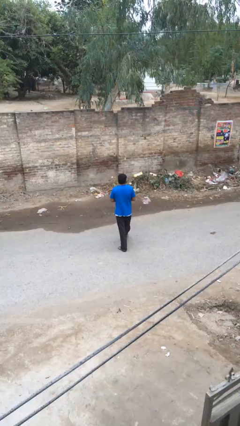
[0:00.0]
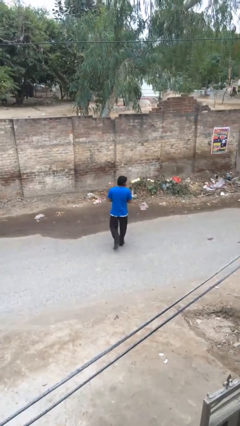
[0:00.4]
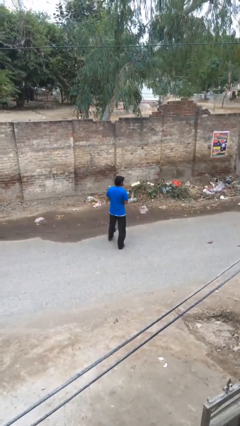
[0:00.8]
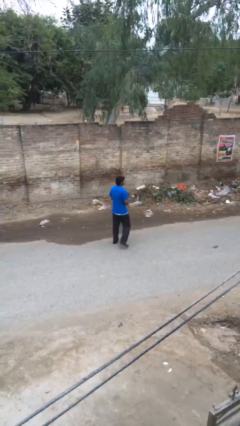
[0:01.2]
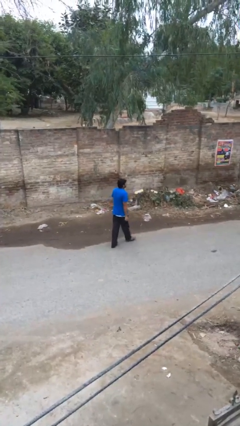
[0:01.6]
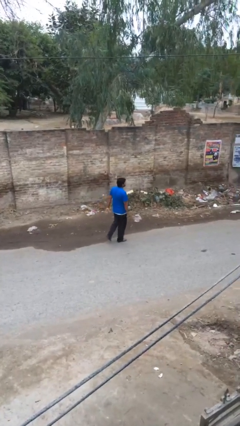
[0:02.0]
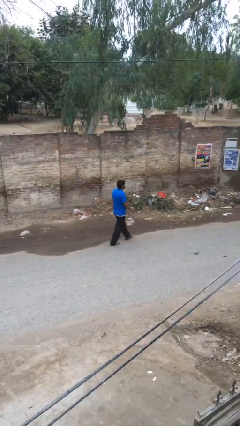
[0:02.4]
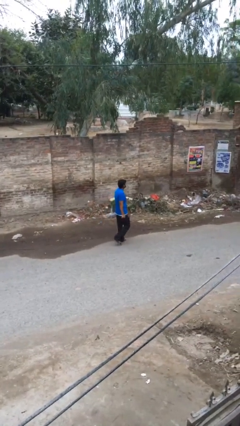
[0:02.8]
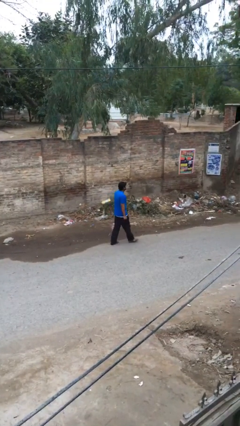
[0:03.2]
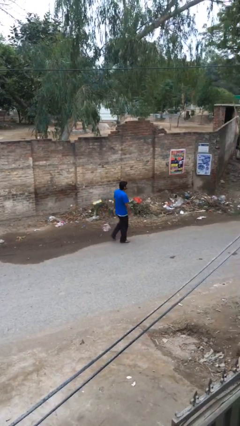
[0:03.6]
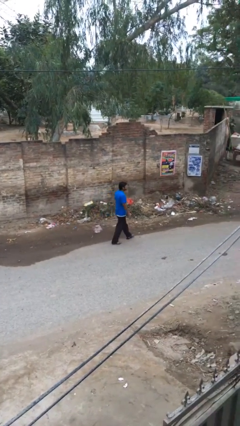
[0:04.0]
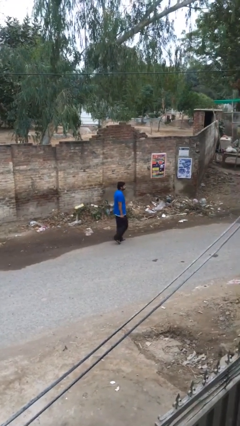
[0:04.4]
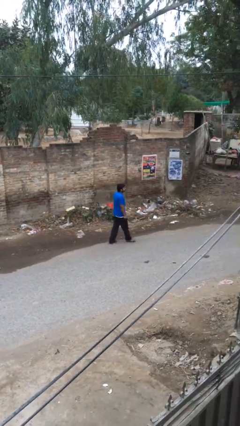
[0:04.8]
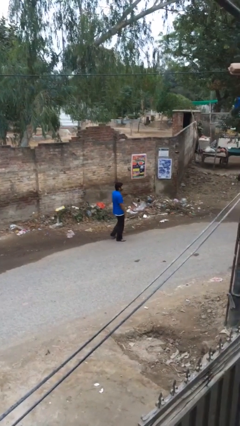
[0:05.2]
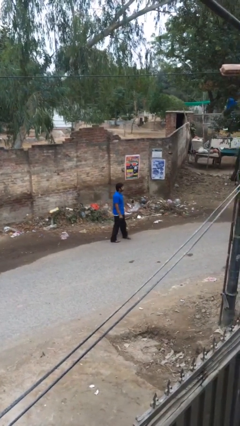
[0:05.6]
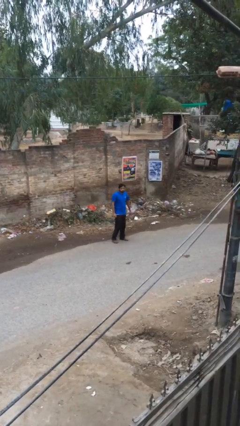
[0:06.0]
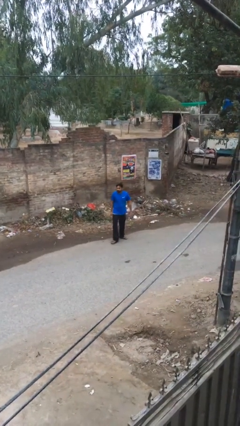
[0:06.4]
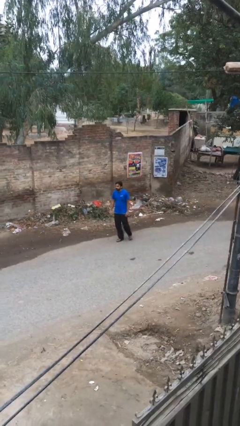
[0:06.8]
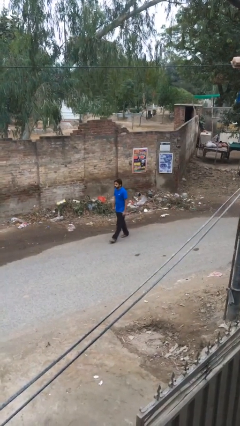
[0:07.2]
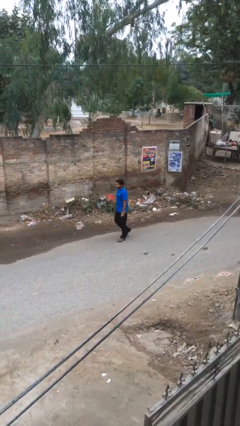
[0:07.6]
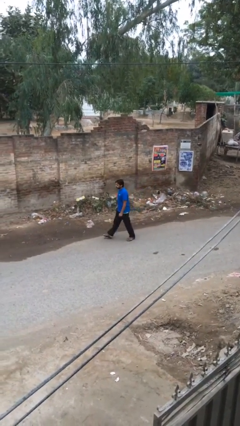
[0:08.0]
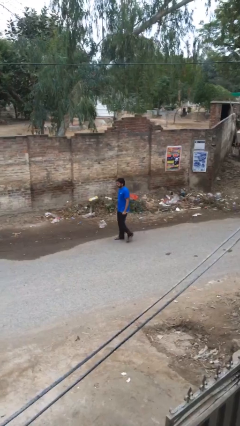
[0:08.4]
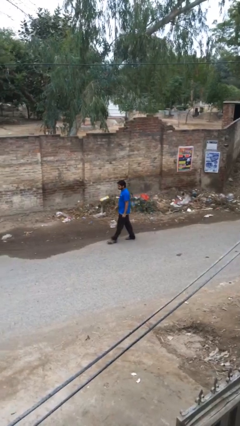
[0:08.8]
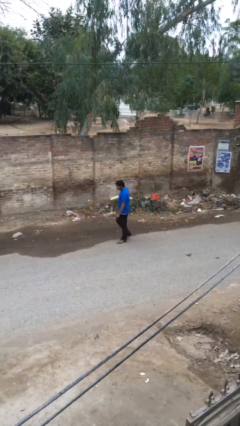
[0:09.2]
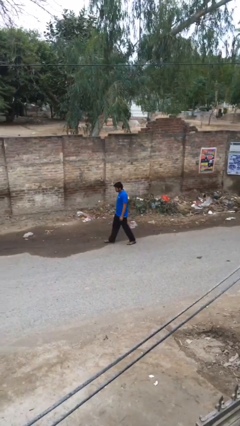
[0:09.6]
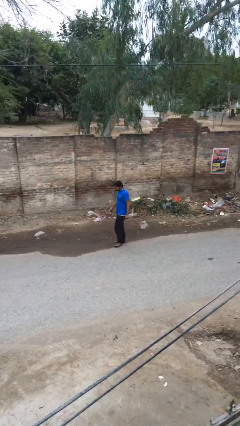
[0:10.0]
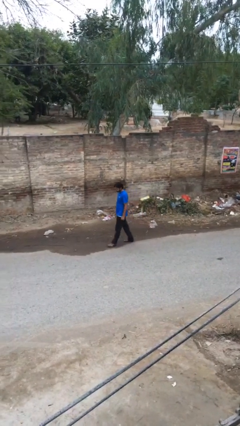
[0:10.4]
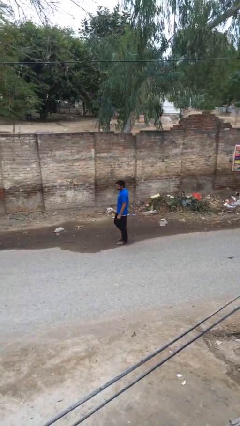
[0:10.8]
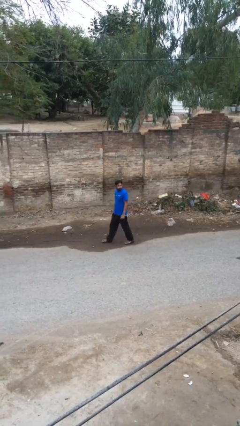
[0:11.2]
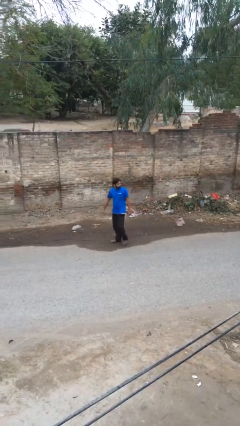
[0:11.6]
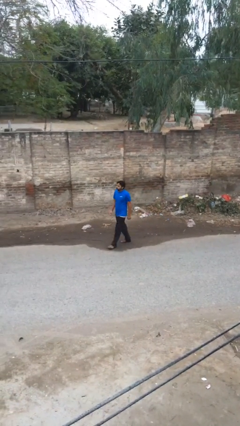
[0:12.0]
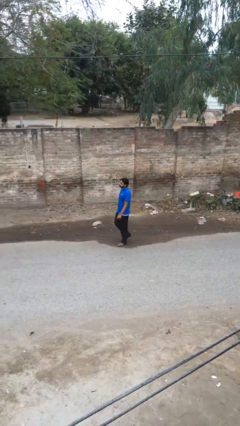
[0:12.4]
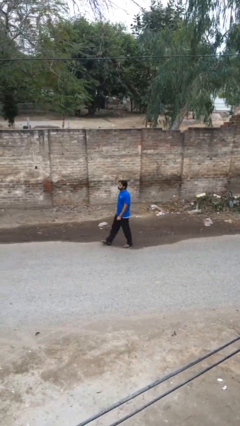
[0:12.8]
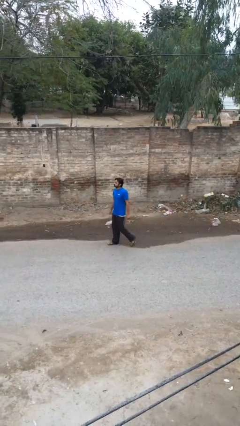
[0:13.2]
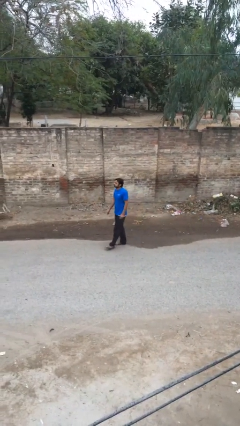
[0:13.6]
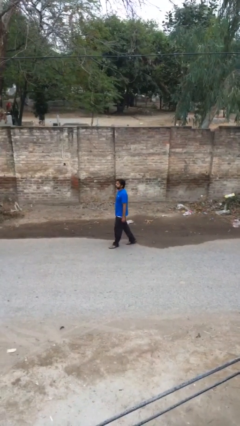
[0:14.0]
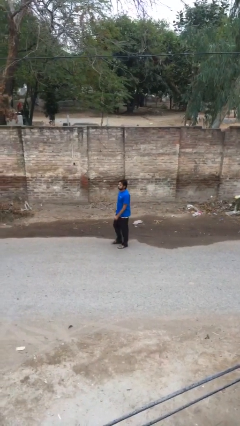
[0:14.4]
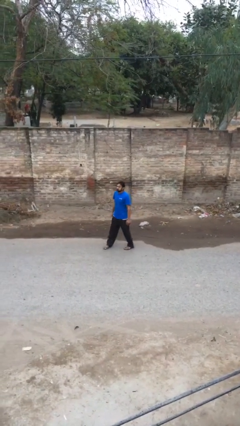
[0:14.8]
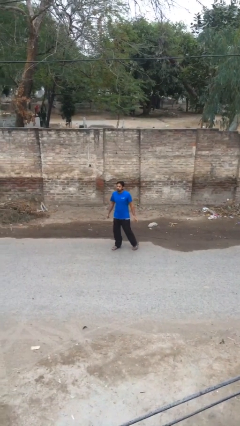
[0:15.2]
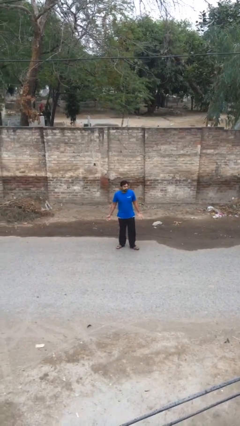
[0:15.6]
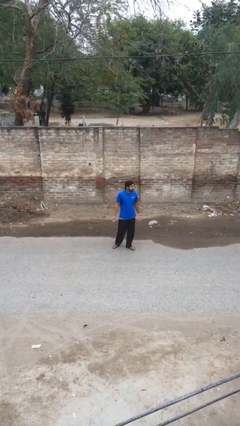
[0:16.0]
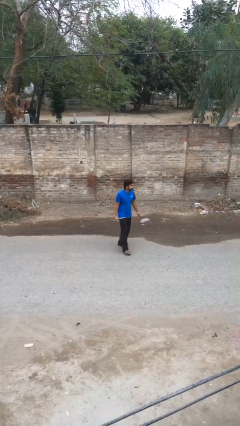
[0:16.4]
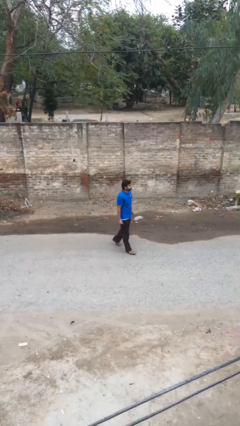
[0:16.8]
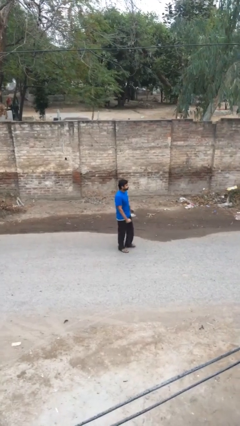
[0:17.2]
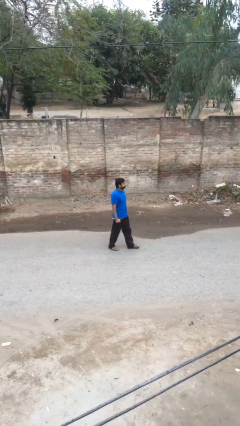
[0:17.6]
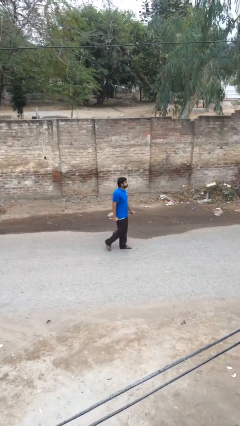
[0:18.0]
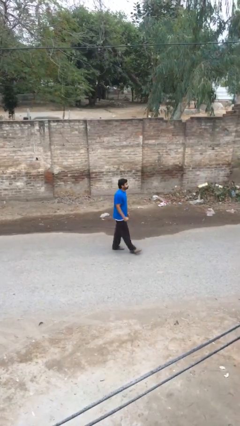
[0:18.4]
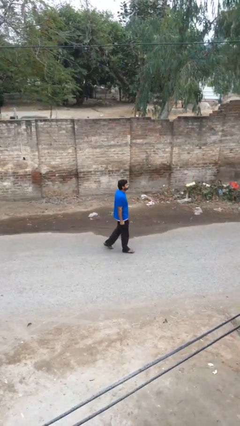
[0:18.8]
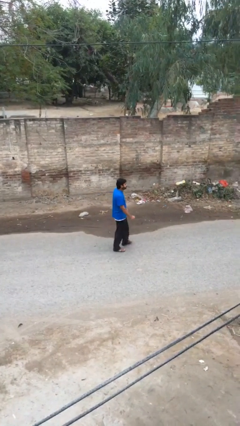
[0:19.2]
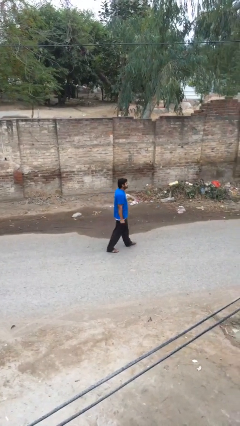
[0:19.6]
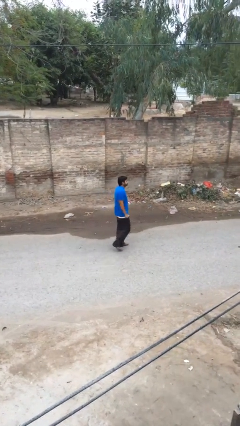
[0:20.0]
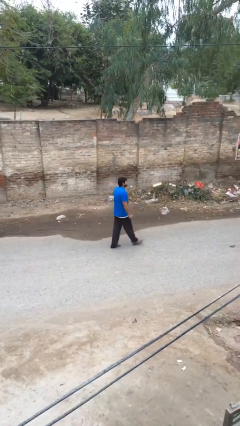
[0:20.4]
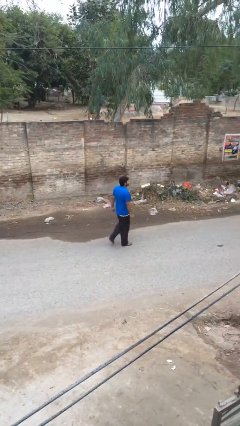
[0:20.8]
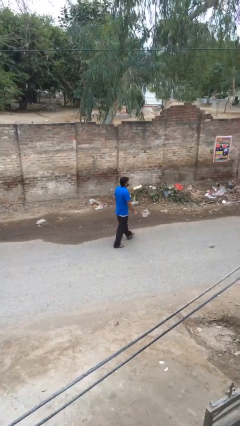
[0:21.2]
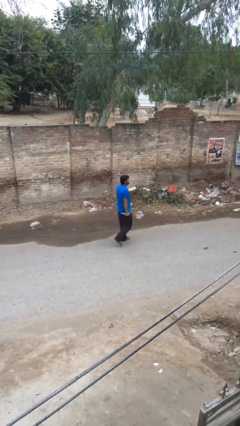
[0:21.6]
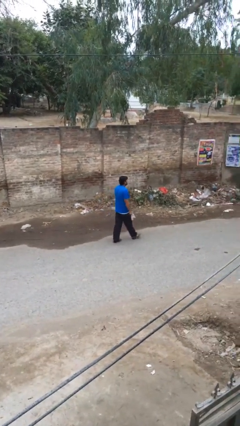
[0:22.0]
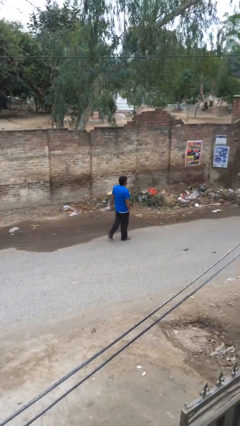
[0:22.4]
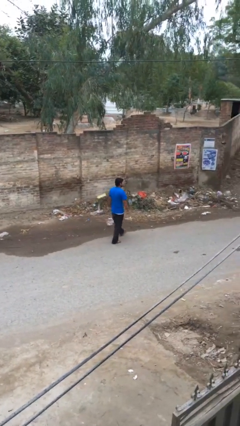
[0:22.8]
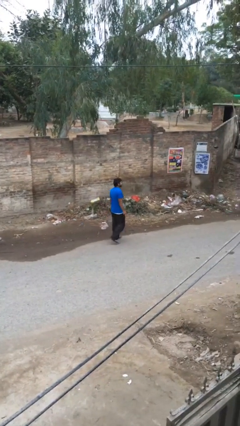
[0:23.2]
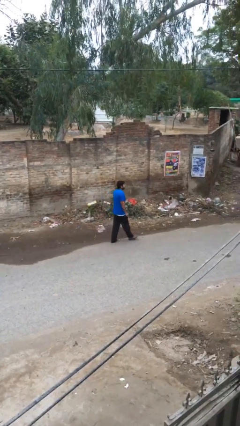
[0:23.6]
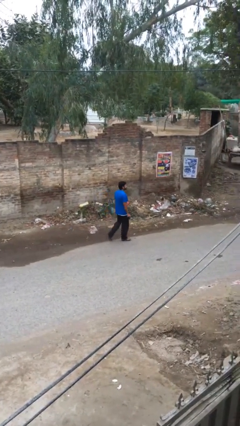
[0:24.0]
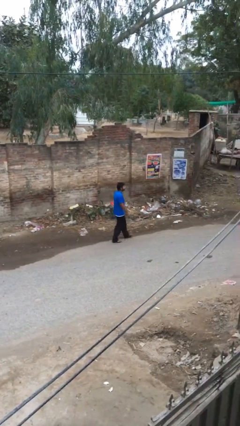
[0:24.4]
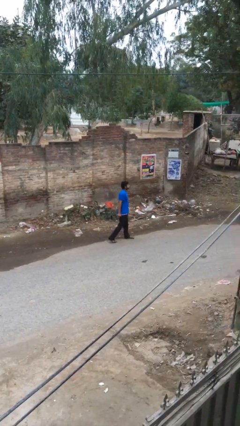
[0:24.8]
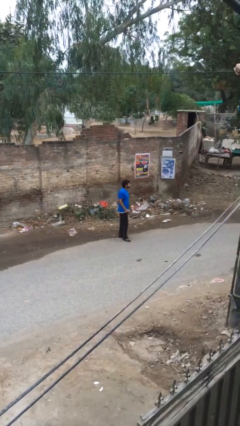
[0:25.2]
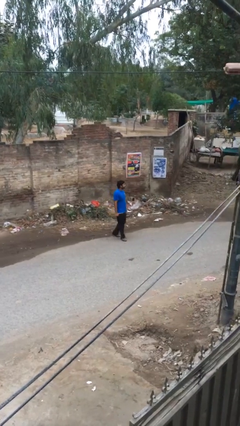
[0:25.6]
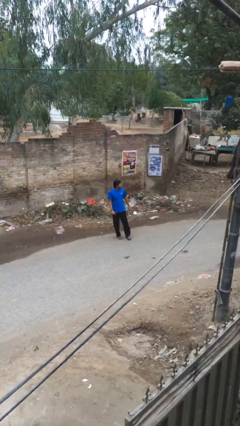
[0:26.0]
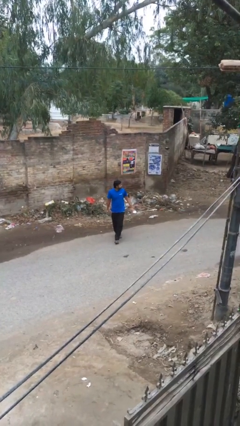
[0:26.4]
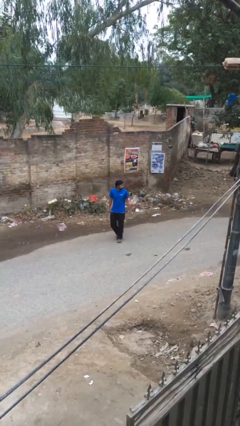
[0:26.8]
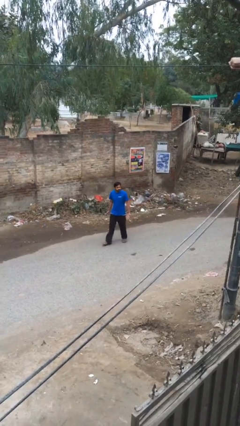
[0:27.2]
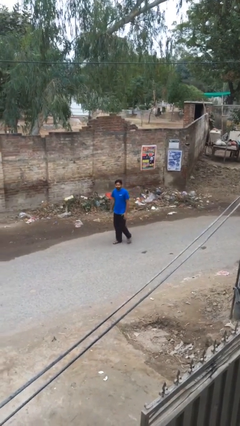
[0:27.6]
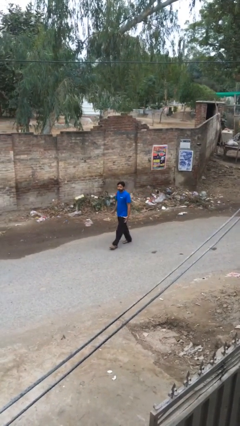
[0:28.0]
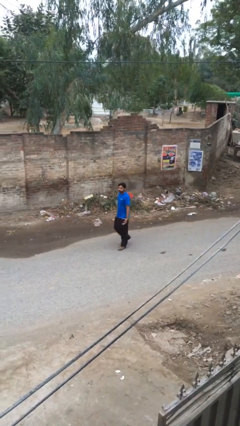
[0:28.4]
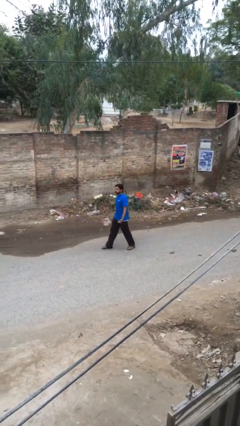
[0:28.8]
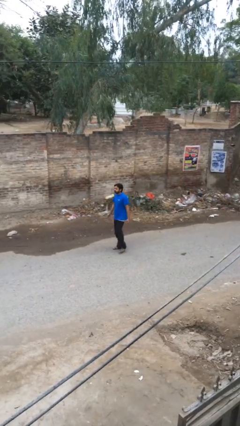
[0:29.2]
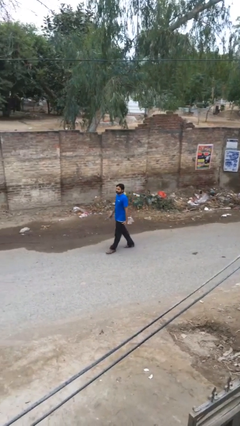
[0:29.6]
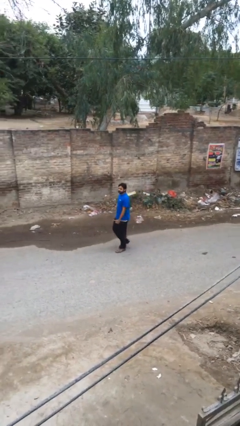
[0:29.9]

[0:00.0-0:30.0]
person walks

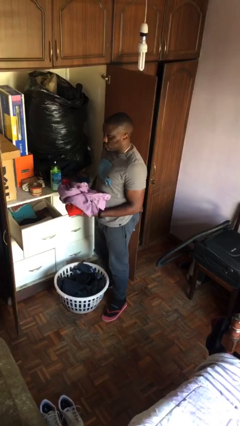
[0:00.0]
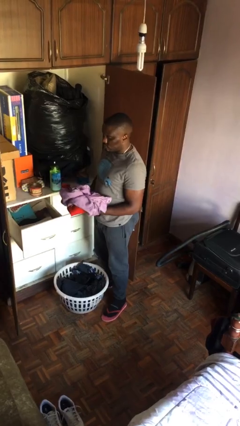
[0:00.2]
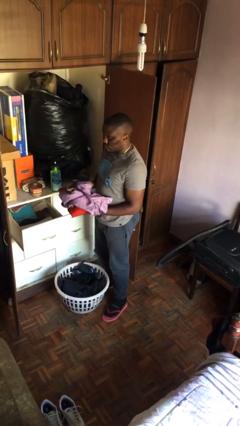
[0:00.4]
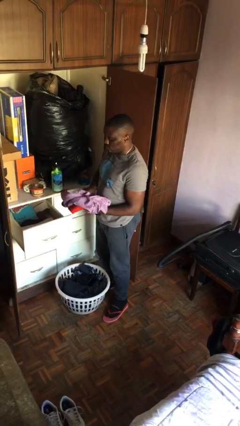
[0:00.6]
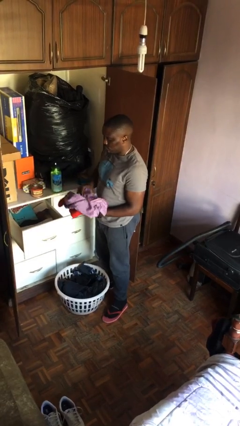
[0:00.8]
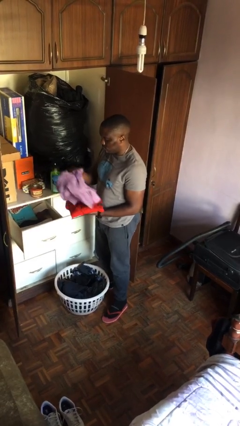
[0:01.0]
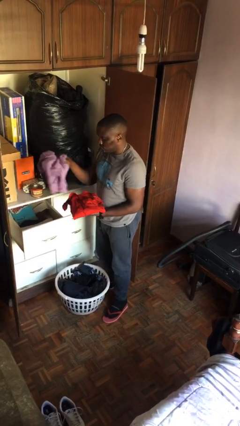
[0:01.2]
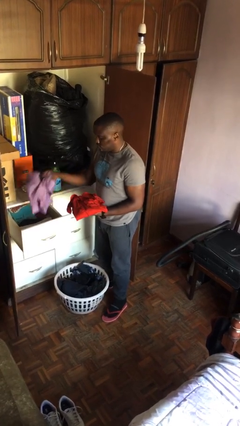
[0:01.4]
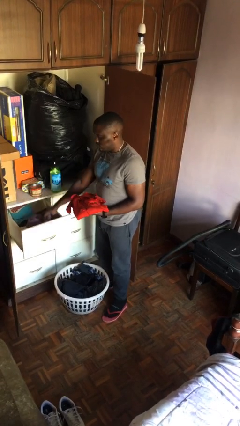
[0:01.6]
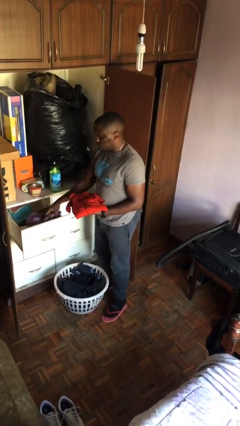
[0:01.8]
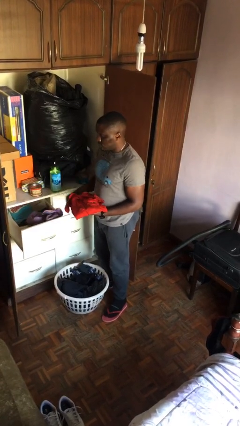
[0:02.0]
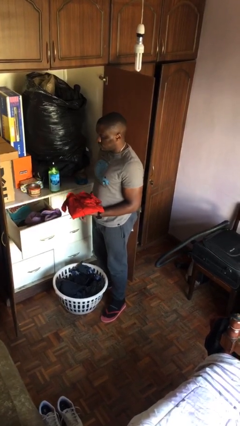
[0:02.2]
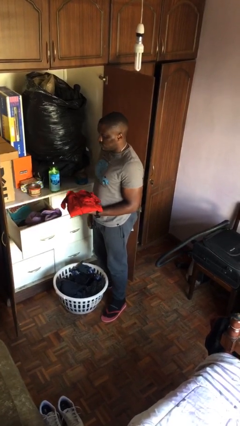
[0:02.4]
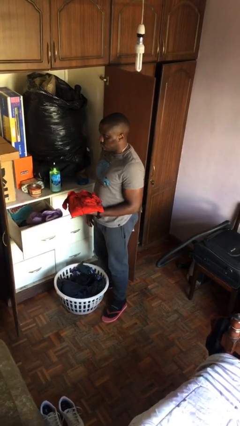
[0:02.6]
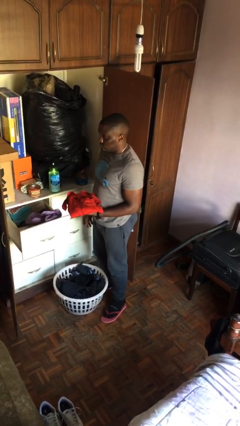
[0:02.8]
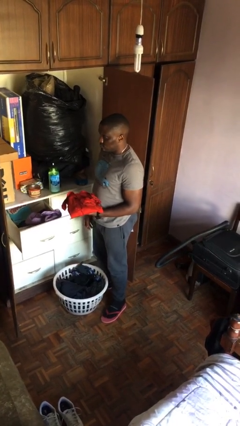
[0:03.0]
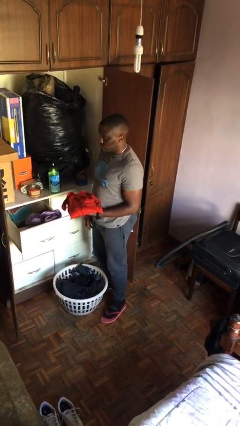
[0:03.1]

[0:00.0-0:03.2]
person puts clothes into dresser
